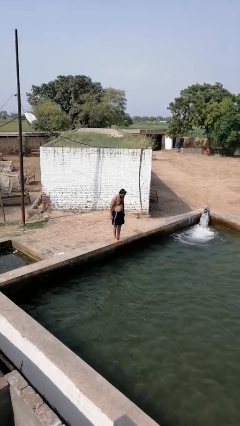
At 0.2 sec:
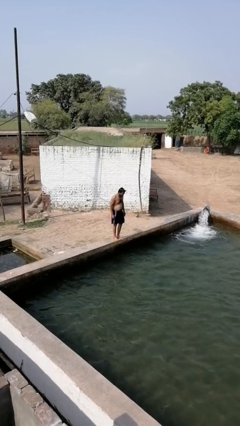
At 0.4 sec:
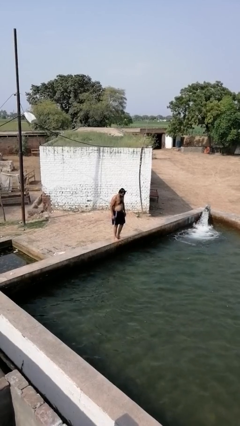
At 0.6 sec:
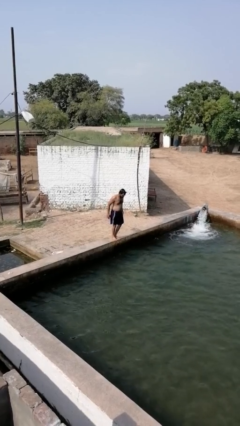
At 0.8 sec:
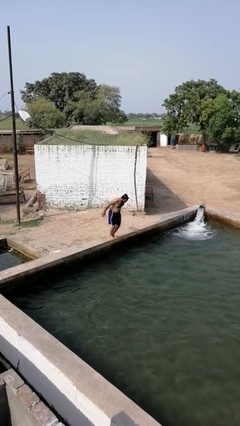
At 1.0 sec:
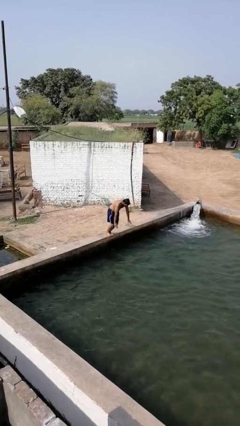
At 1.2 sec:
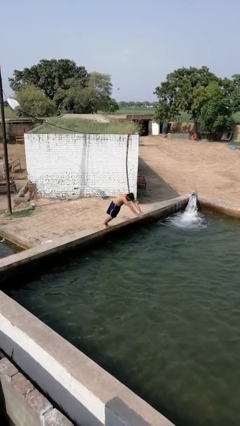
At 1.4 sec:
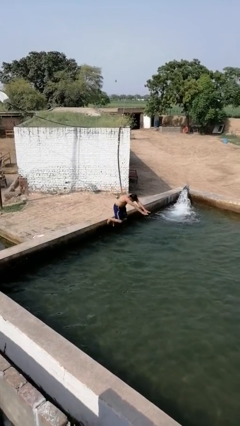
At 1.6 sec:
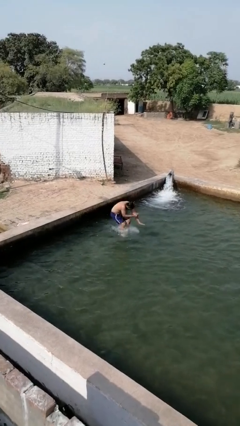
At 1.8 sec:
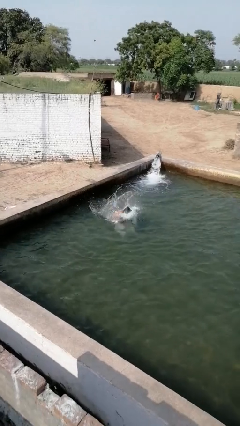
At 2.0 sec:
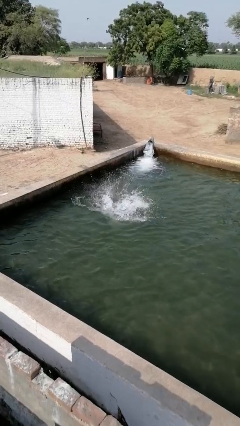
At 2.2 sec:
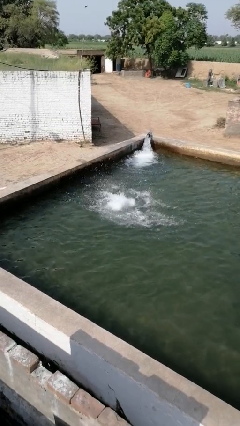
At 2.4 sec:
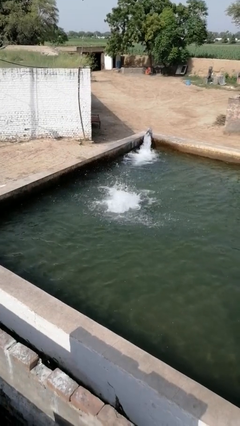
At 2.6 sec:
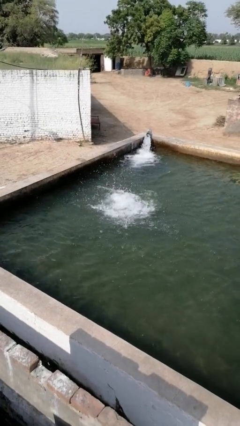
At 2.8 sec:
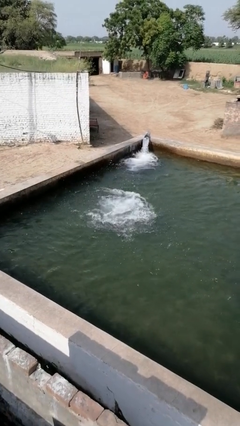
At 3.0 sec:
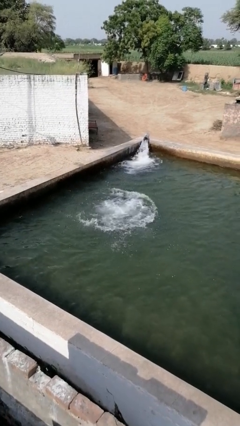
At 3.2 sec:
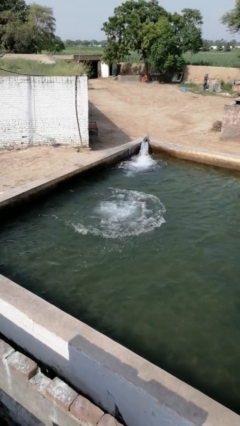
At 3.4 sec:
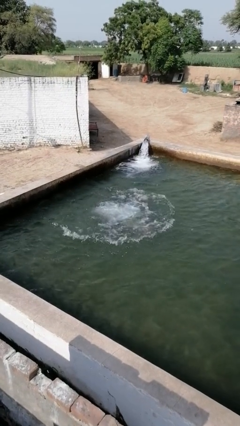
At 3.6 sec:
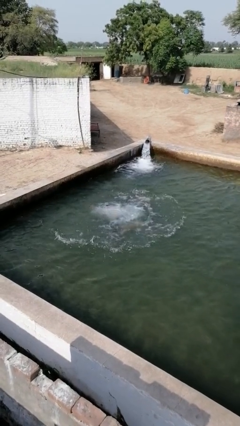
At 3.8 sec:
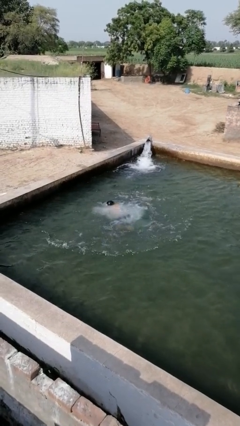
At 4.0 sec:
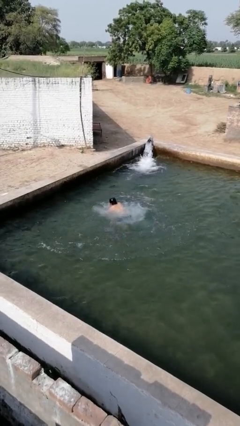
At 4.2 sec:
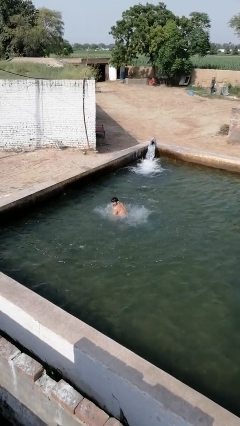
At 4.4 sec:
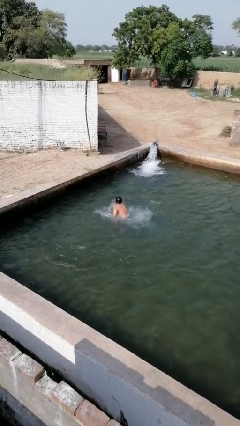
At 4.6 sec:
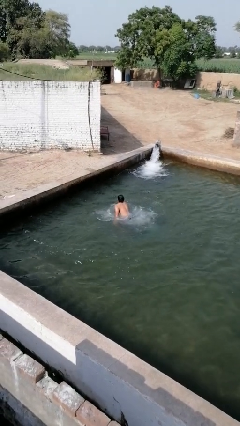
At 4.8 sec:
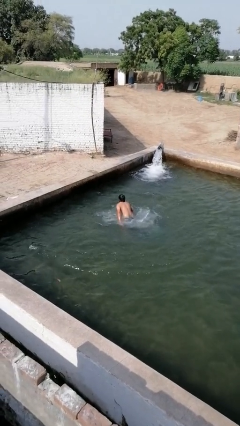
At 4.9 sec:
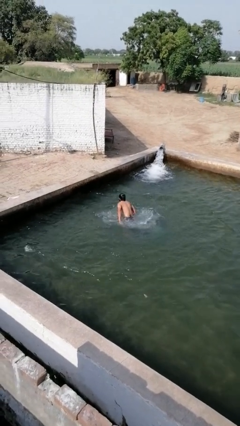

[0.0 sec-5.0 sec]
person jumps into pool

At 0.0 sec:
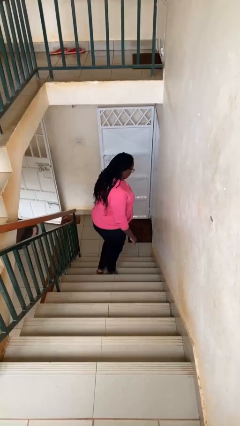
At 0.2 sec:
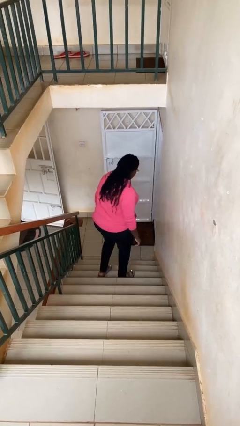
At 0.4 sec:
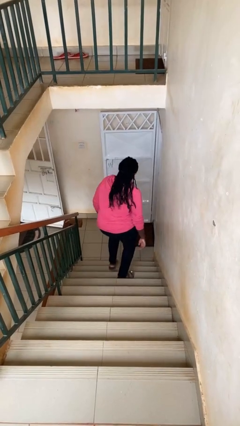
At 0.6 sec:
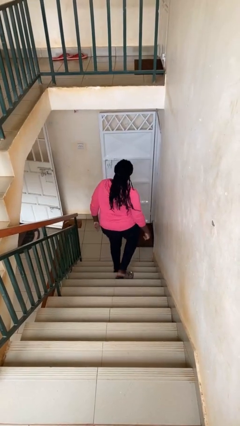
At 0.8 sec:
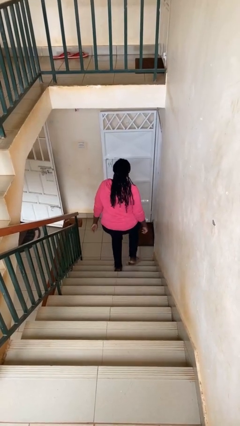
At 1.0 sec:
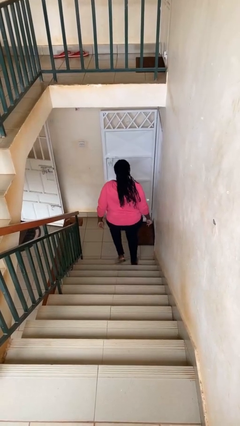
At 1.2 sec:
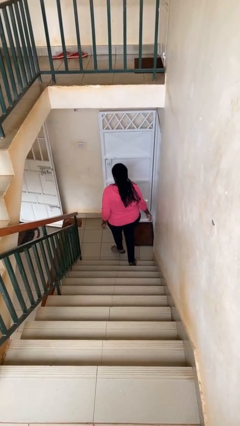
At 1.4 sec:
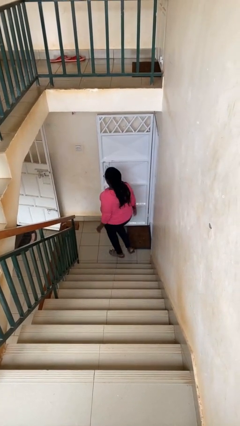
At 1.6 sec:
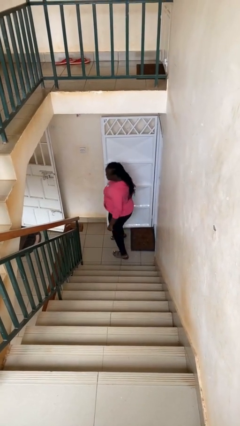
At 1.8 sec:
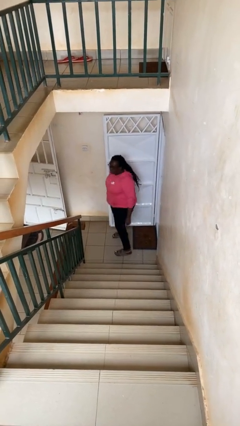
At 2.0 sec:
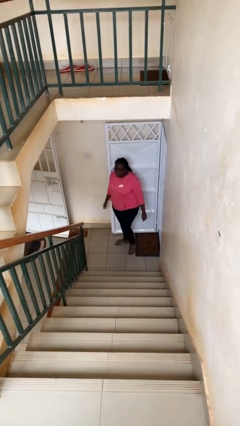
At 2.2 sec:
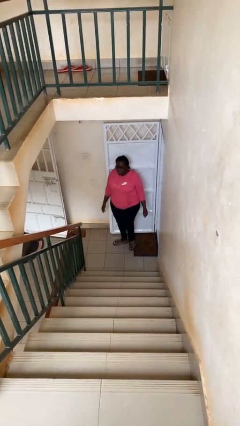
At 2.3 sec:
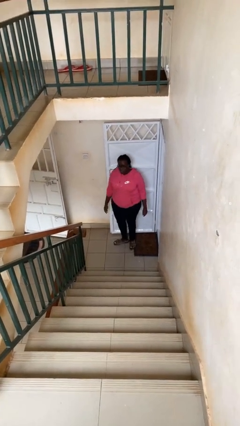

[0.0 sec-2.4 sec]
person climbs down stairs

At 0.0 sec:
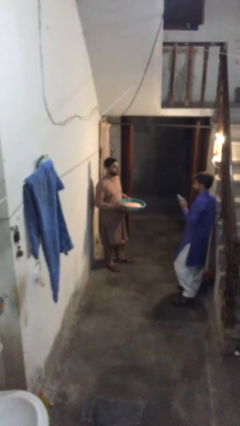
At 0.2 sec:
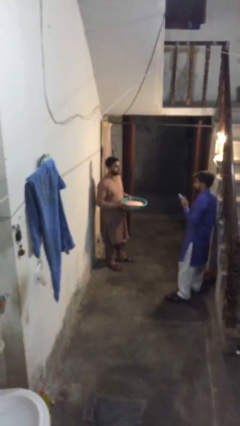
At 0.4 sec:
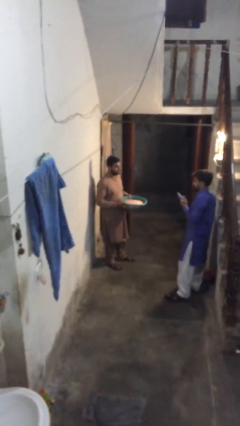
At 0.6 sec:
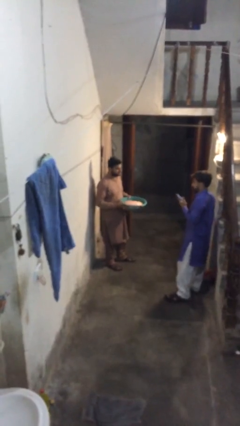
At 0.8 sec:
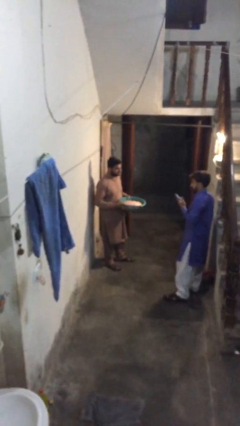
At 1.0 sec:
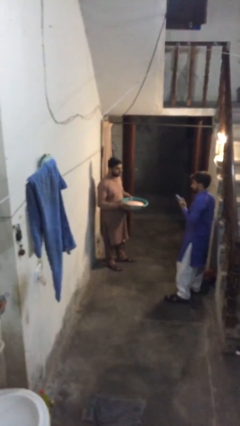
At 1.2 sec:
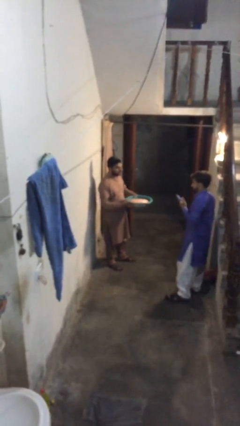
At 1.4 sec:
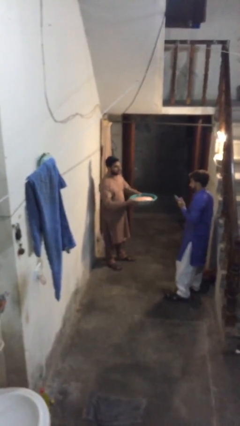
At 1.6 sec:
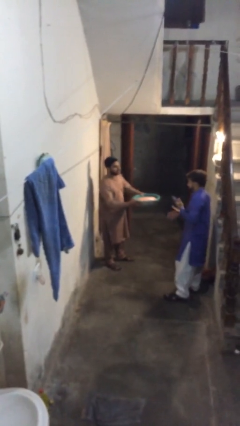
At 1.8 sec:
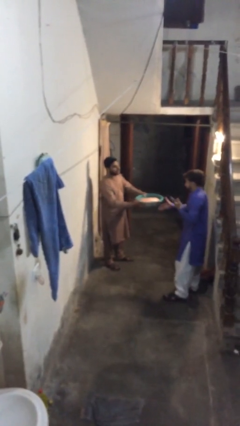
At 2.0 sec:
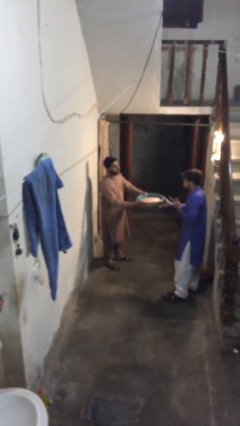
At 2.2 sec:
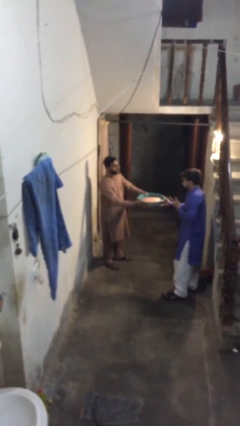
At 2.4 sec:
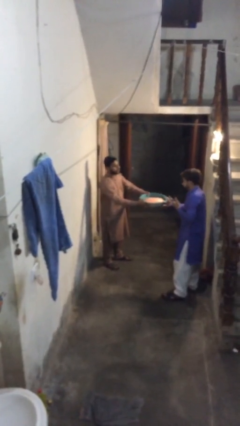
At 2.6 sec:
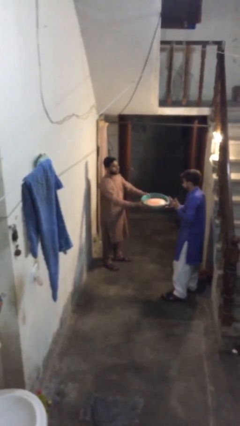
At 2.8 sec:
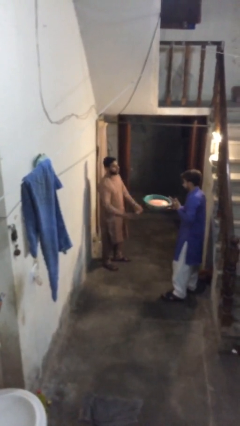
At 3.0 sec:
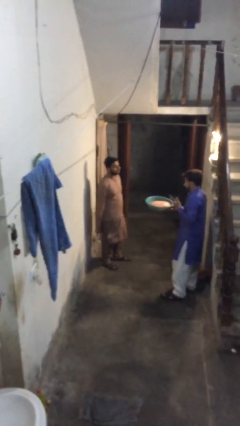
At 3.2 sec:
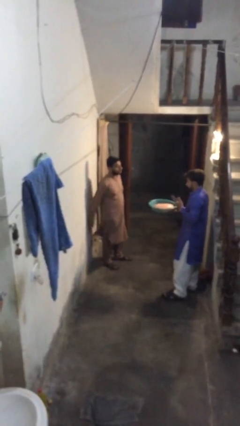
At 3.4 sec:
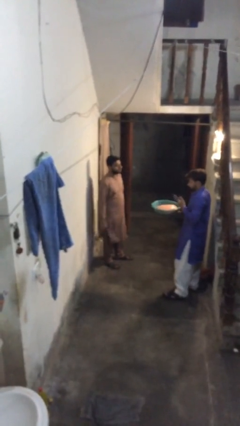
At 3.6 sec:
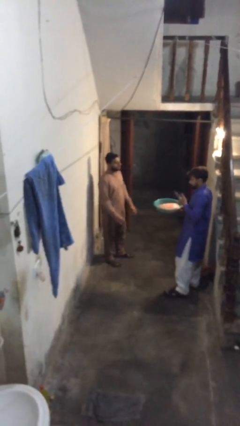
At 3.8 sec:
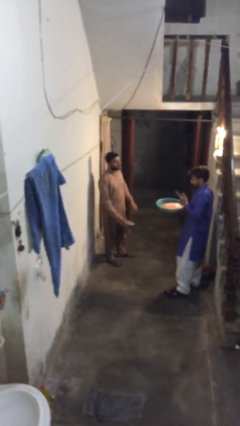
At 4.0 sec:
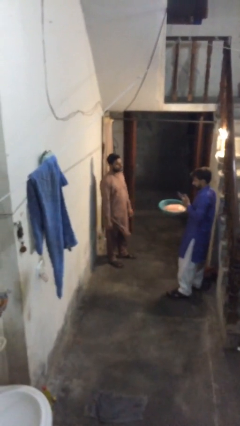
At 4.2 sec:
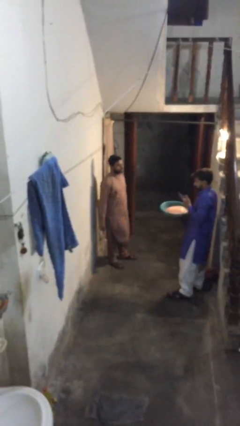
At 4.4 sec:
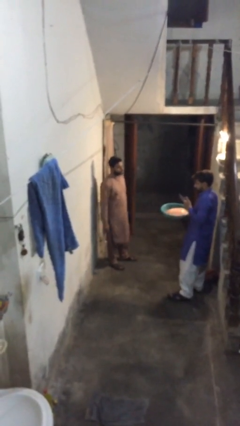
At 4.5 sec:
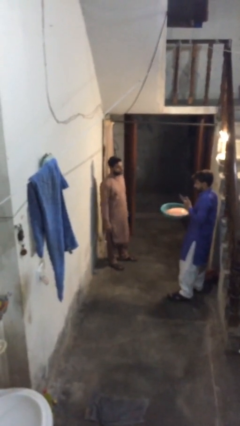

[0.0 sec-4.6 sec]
person transfers object to person

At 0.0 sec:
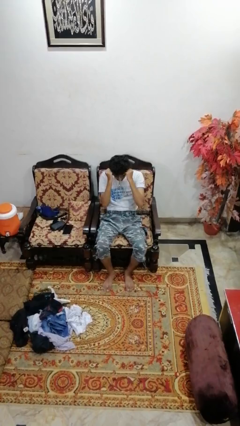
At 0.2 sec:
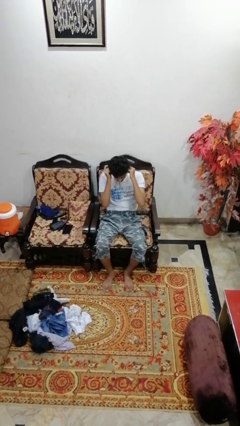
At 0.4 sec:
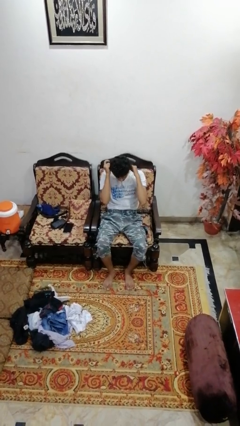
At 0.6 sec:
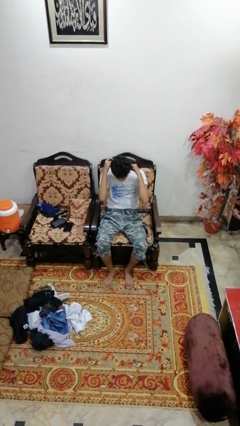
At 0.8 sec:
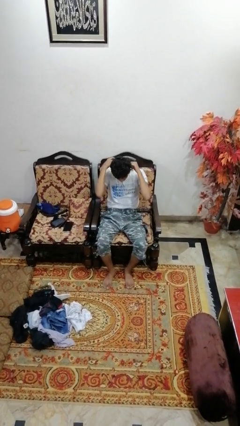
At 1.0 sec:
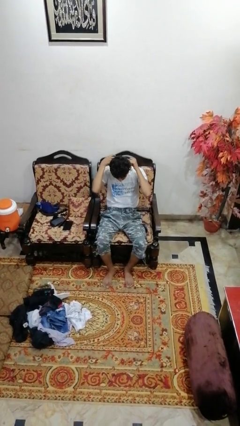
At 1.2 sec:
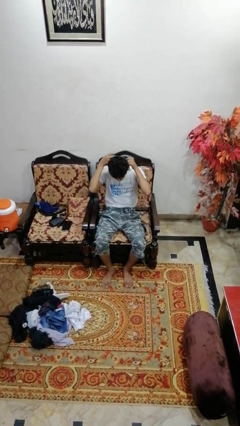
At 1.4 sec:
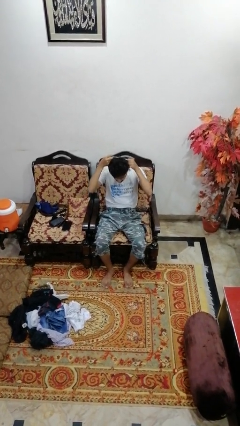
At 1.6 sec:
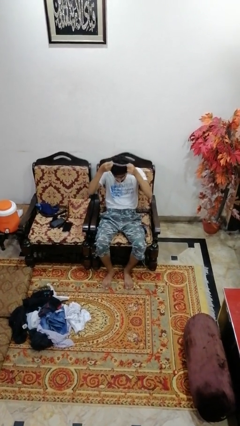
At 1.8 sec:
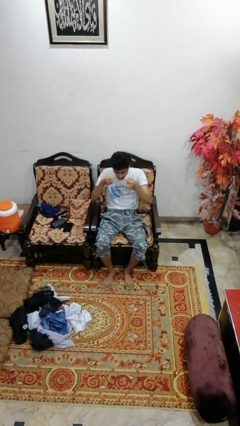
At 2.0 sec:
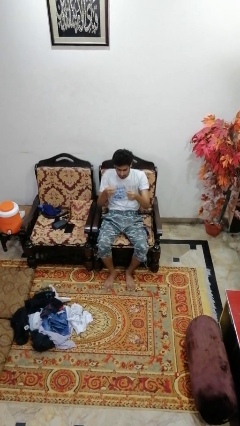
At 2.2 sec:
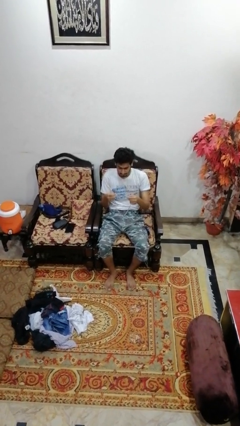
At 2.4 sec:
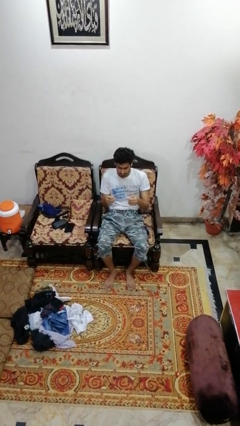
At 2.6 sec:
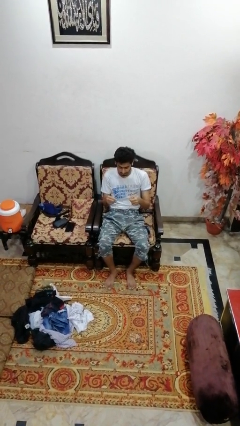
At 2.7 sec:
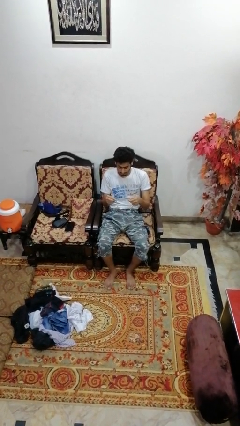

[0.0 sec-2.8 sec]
person takes off necklace

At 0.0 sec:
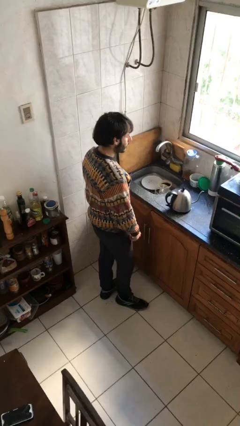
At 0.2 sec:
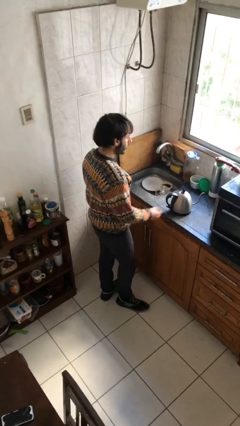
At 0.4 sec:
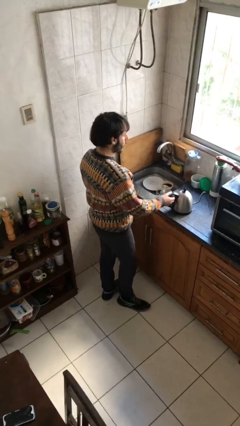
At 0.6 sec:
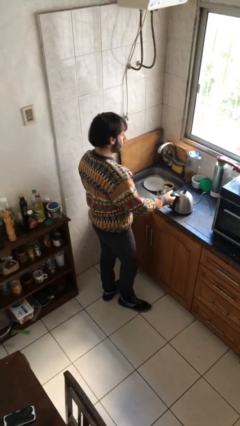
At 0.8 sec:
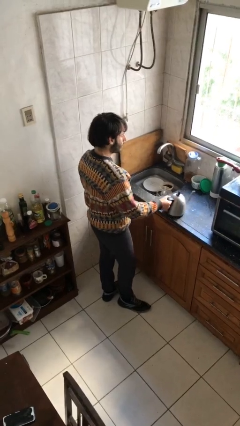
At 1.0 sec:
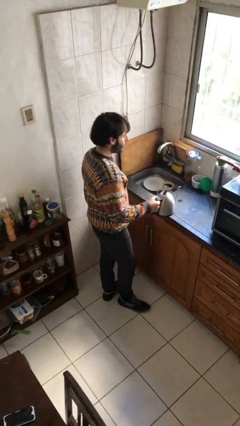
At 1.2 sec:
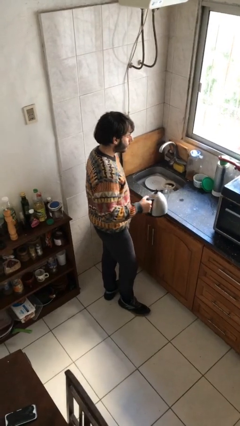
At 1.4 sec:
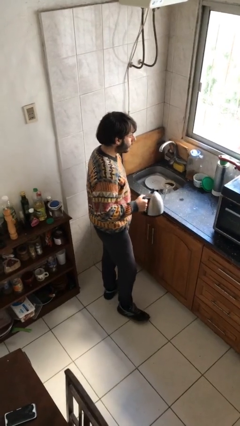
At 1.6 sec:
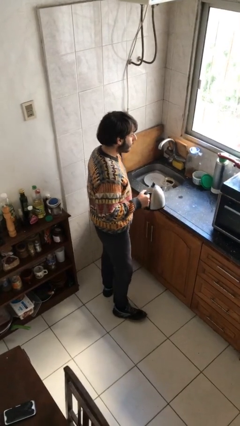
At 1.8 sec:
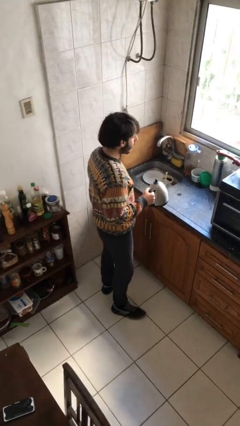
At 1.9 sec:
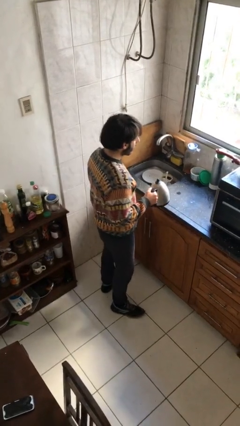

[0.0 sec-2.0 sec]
person picks up object from countertop
